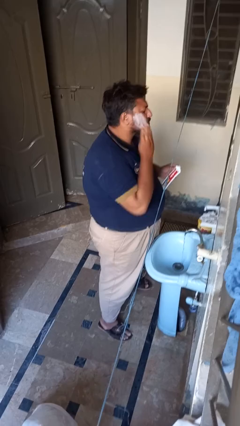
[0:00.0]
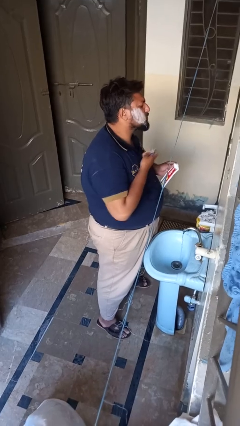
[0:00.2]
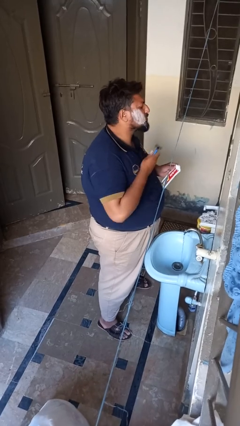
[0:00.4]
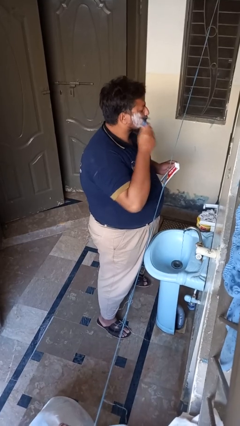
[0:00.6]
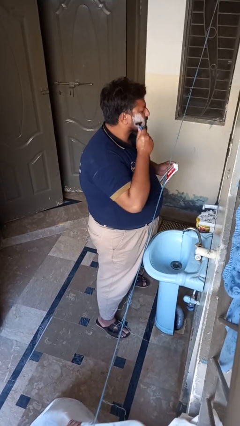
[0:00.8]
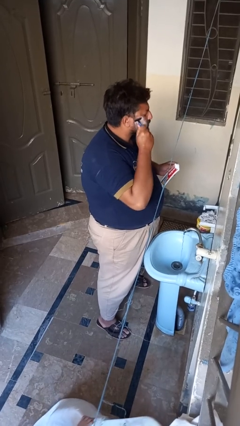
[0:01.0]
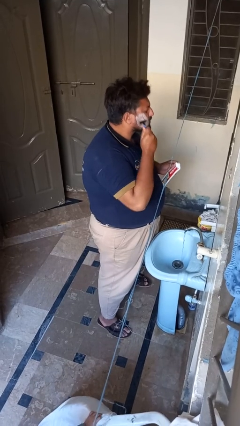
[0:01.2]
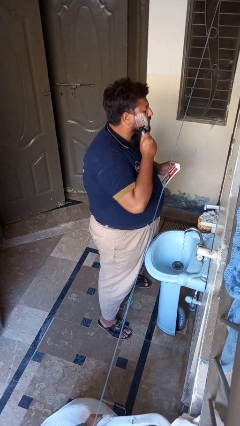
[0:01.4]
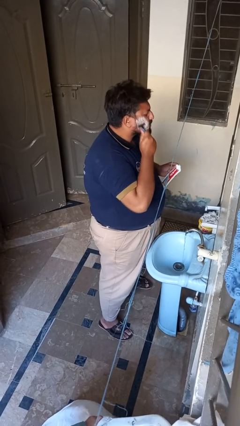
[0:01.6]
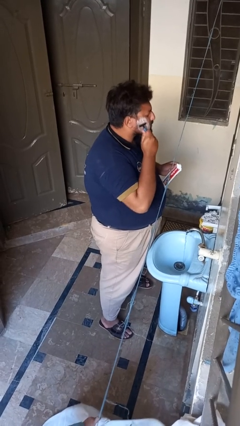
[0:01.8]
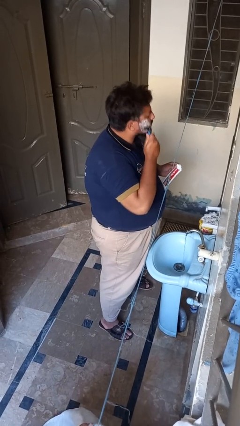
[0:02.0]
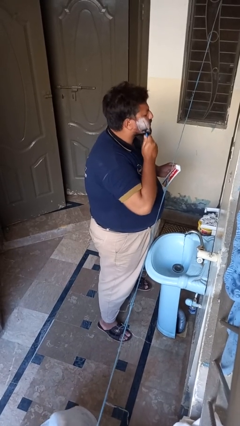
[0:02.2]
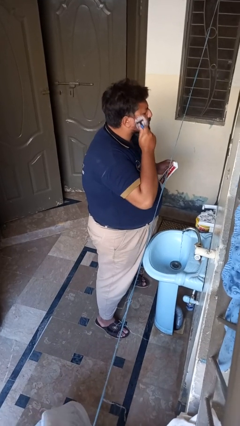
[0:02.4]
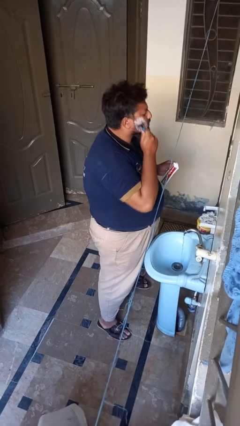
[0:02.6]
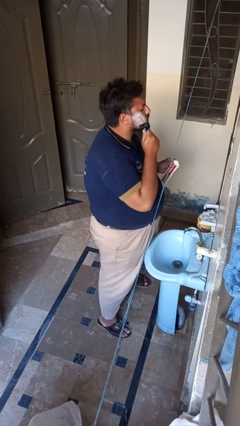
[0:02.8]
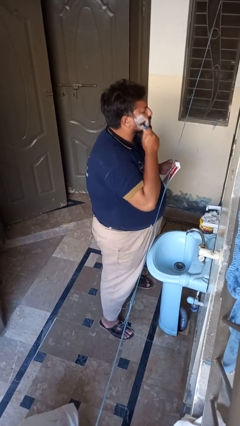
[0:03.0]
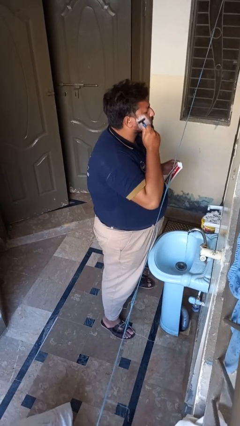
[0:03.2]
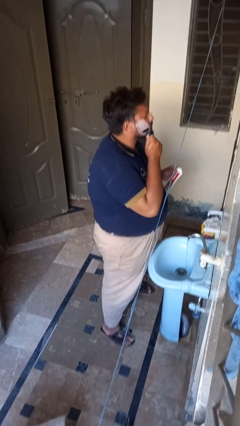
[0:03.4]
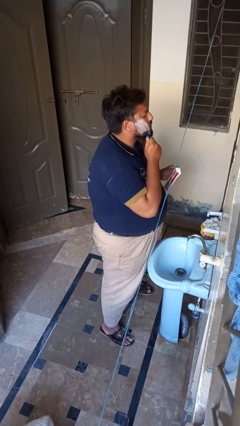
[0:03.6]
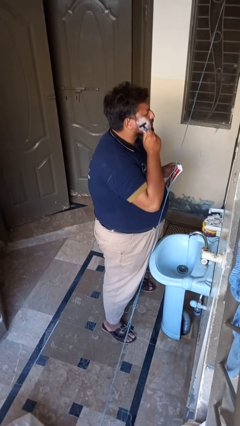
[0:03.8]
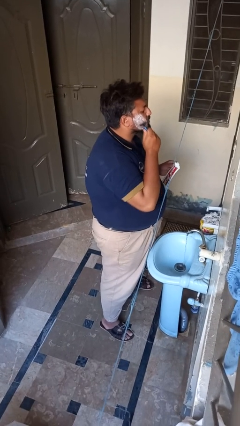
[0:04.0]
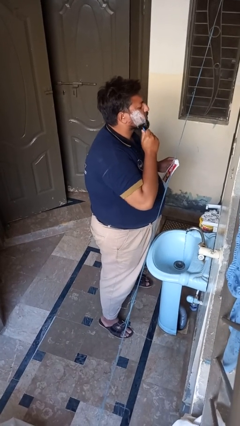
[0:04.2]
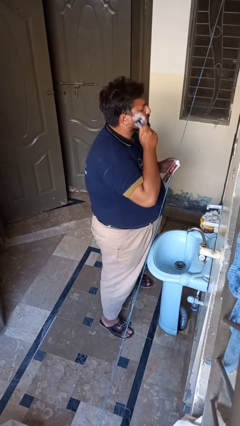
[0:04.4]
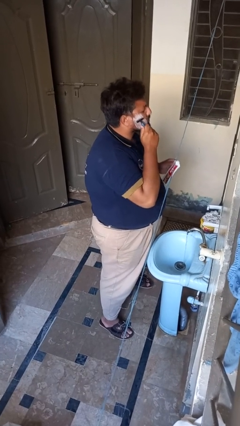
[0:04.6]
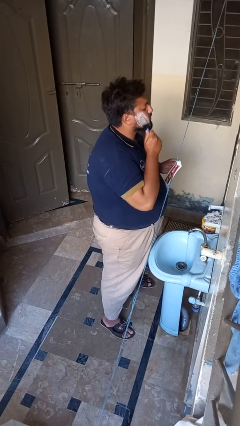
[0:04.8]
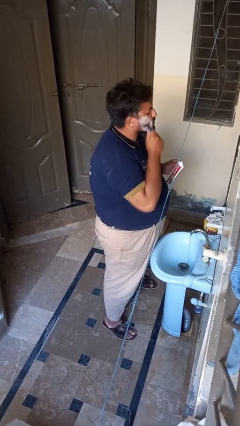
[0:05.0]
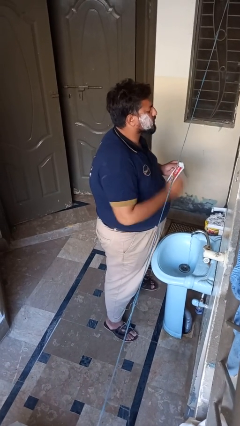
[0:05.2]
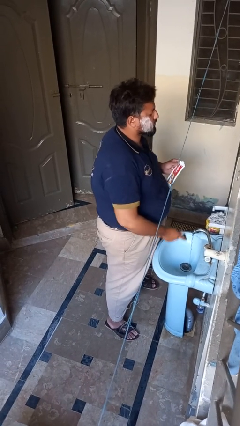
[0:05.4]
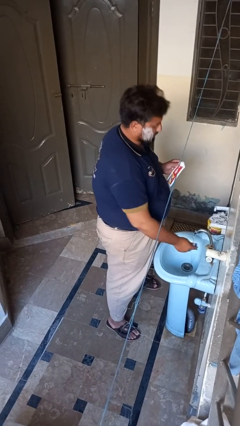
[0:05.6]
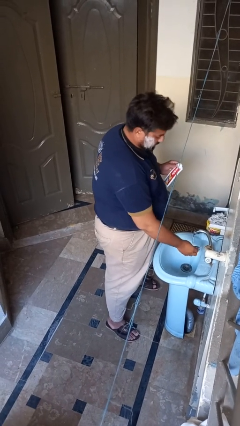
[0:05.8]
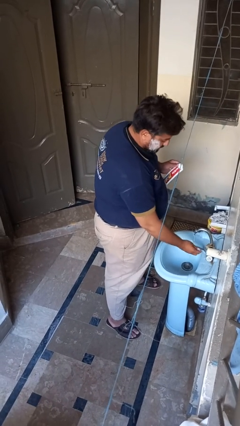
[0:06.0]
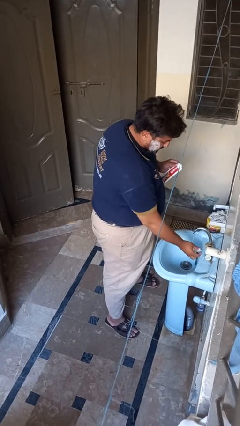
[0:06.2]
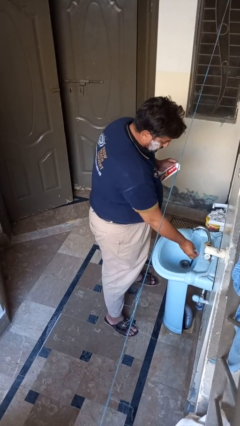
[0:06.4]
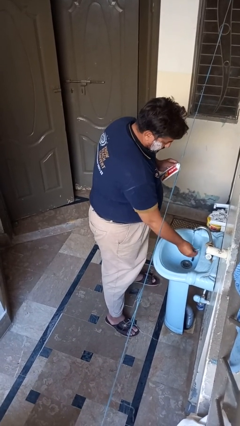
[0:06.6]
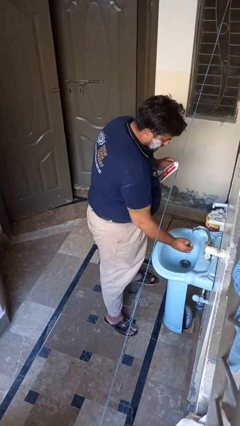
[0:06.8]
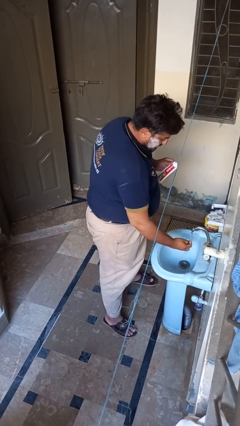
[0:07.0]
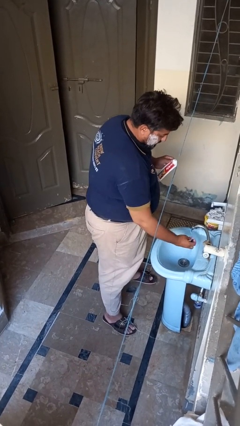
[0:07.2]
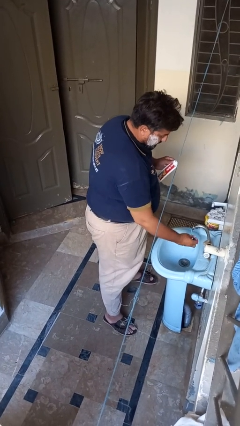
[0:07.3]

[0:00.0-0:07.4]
person shaves face

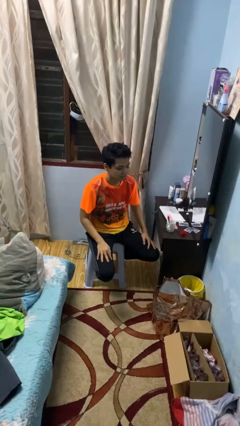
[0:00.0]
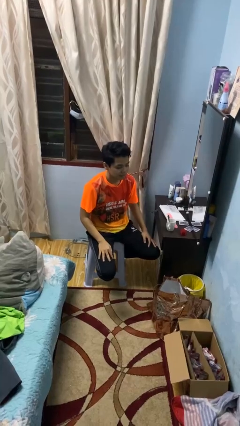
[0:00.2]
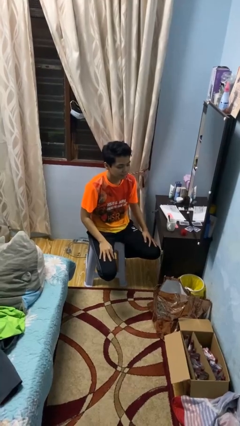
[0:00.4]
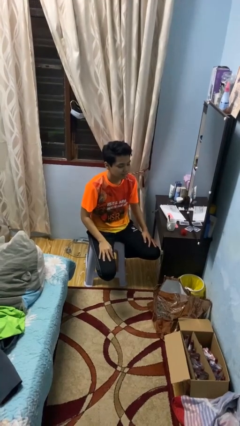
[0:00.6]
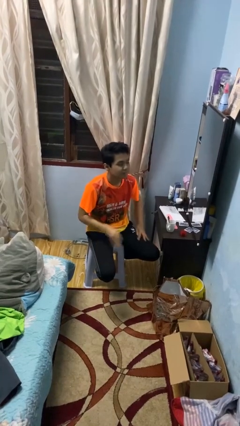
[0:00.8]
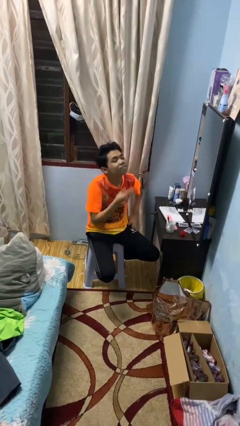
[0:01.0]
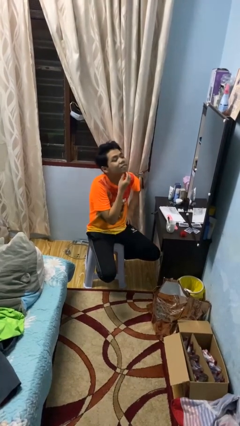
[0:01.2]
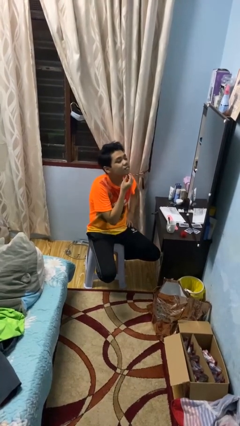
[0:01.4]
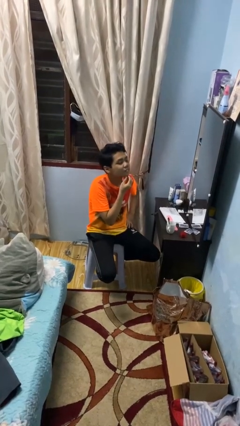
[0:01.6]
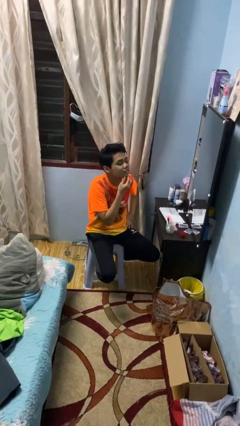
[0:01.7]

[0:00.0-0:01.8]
person strokes chin

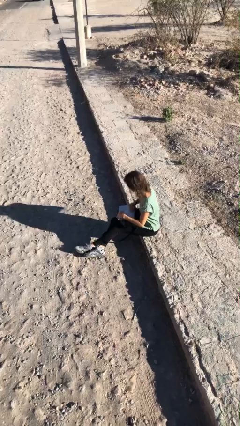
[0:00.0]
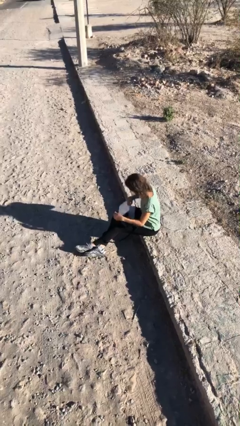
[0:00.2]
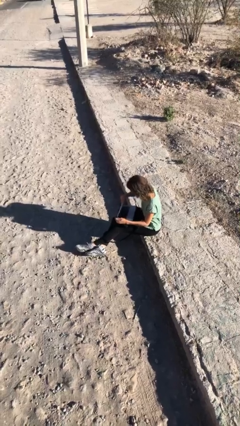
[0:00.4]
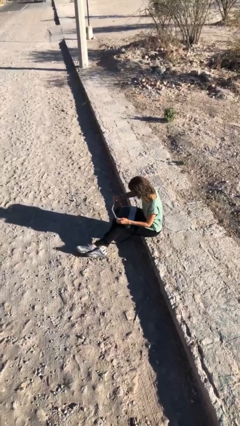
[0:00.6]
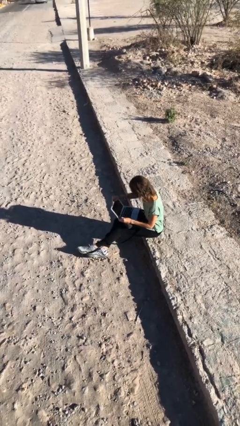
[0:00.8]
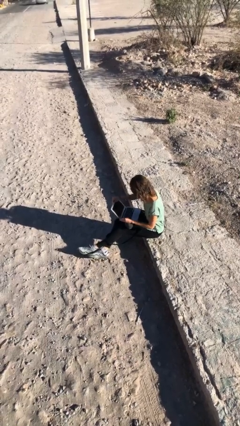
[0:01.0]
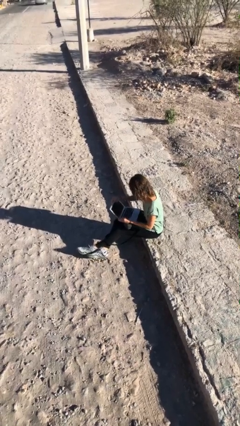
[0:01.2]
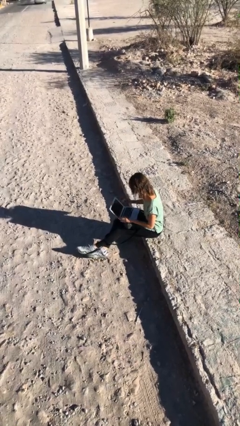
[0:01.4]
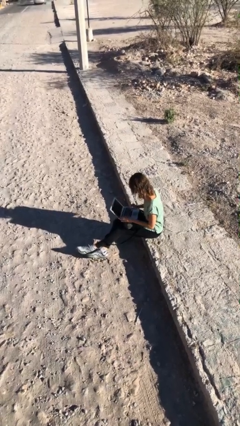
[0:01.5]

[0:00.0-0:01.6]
person interacts with laptop

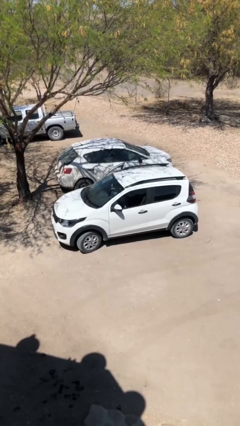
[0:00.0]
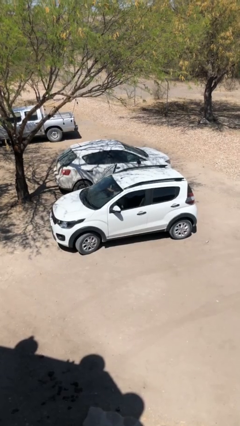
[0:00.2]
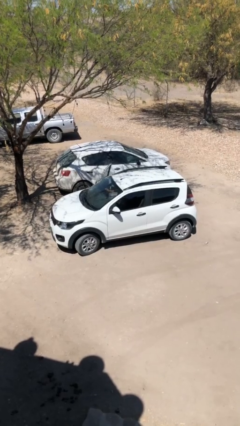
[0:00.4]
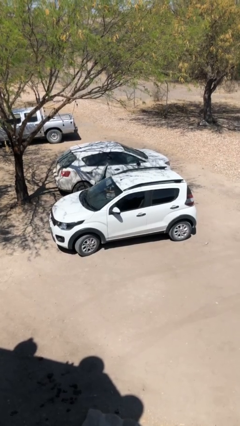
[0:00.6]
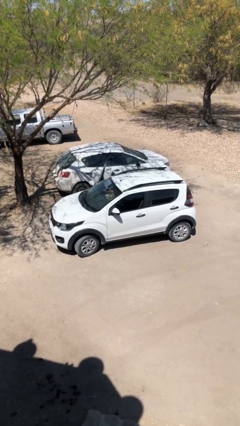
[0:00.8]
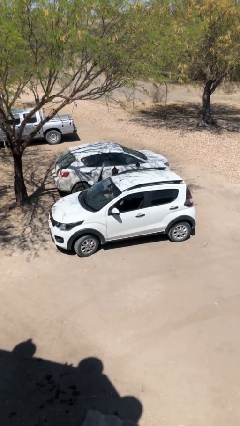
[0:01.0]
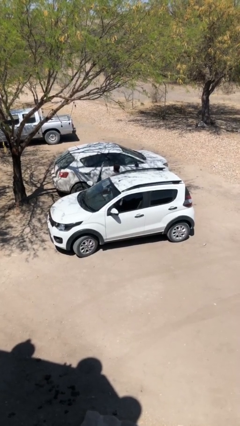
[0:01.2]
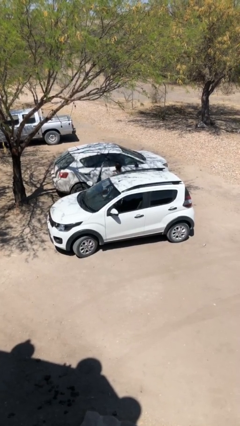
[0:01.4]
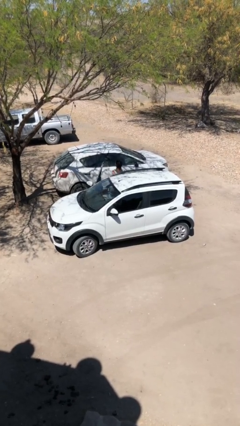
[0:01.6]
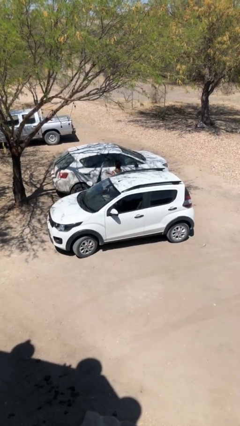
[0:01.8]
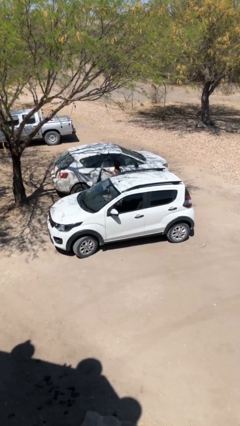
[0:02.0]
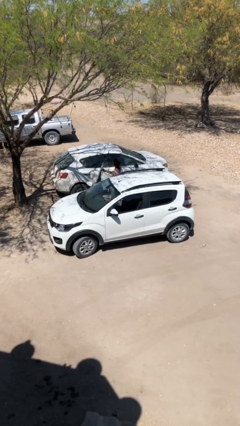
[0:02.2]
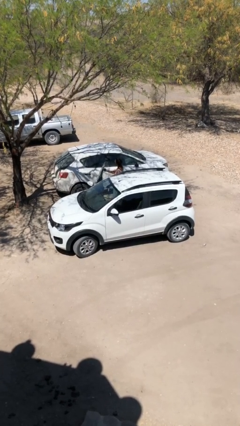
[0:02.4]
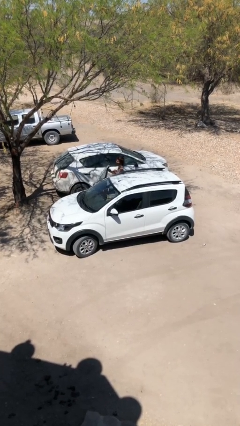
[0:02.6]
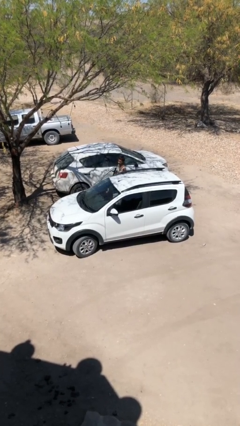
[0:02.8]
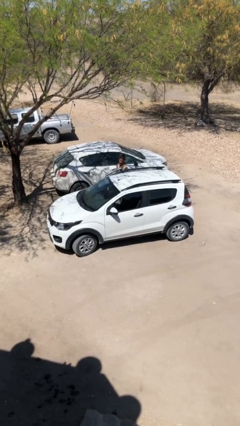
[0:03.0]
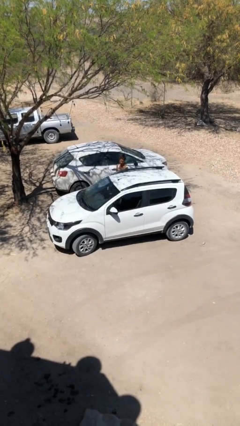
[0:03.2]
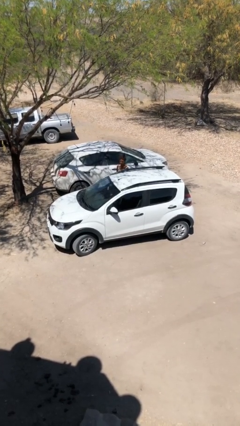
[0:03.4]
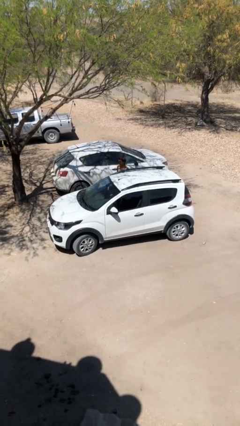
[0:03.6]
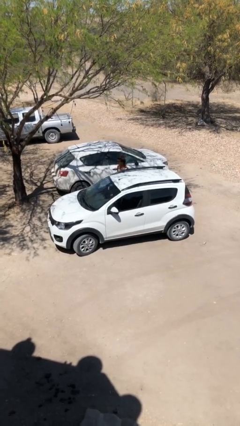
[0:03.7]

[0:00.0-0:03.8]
car drops off person

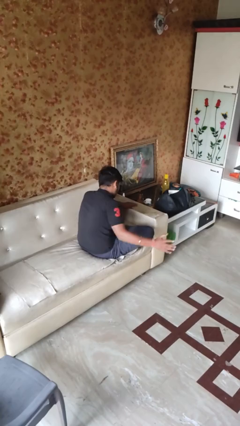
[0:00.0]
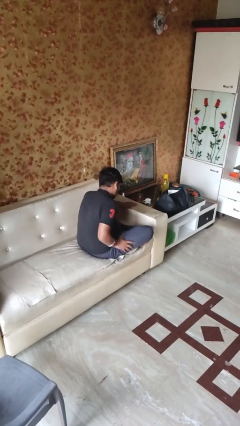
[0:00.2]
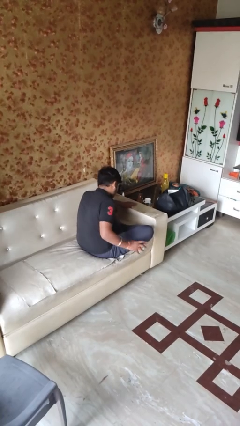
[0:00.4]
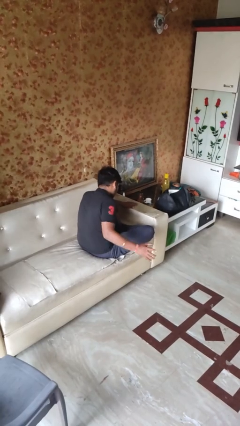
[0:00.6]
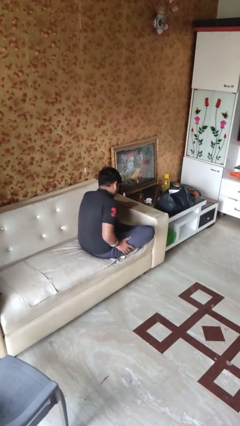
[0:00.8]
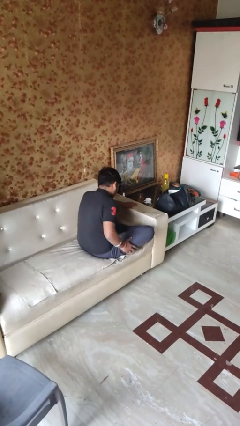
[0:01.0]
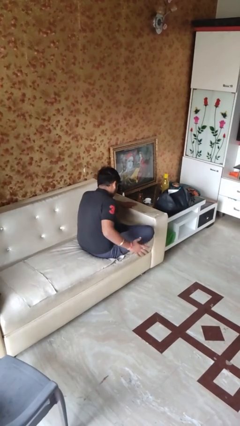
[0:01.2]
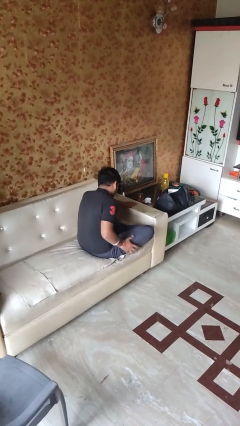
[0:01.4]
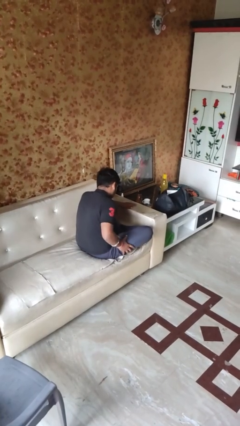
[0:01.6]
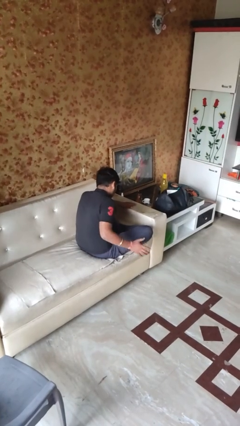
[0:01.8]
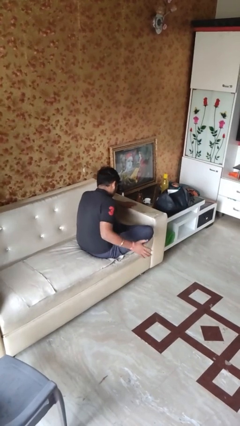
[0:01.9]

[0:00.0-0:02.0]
person slaps hands on thighs

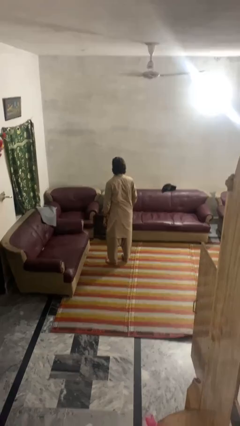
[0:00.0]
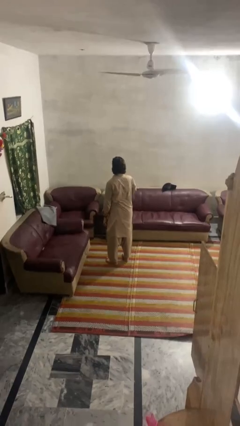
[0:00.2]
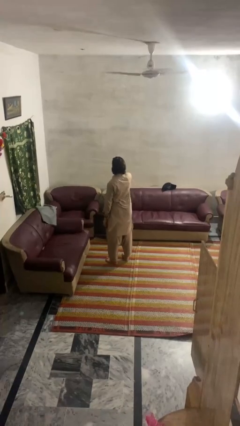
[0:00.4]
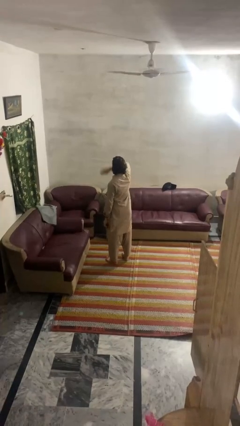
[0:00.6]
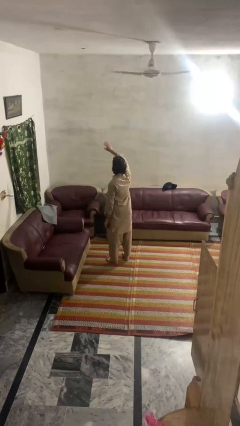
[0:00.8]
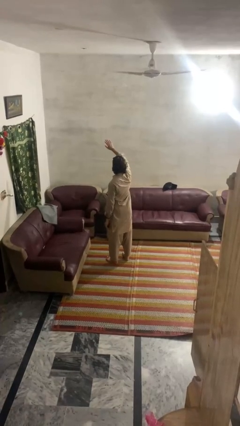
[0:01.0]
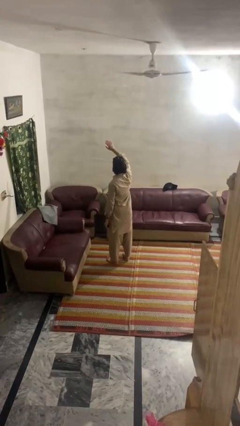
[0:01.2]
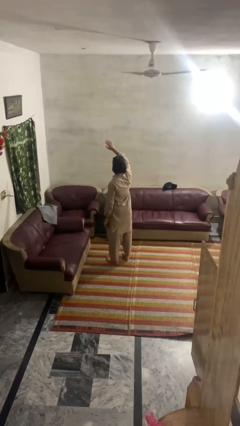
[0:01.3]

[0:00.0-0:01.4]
person gestures swipe up
